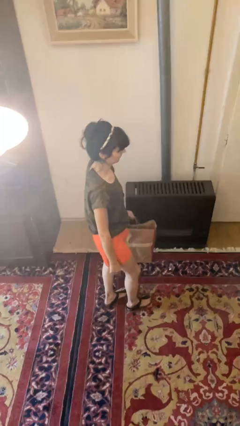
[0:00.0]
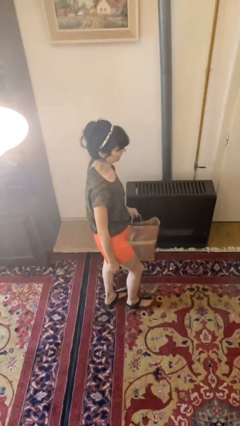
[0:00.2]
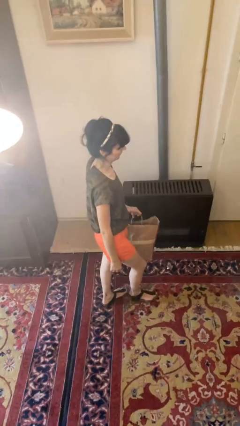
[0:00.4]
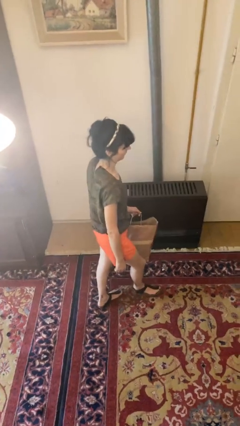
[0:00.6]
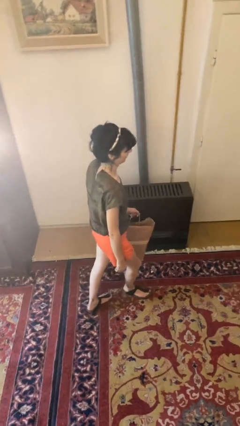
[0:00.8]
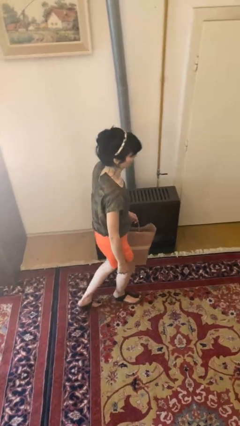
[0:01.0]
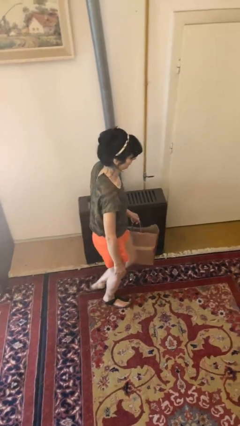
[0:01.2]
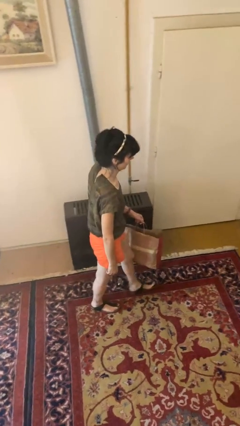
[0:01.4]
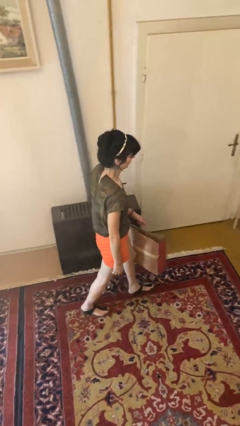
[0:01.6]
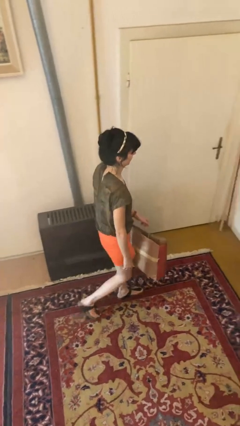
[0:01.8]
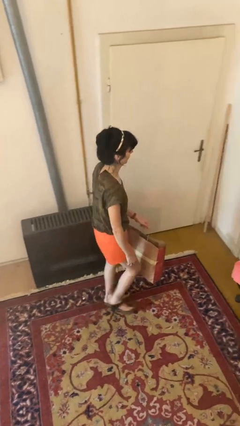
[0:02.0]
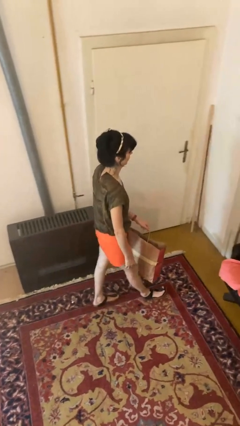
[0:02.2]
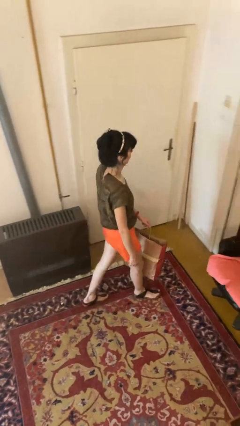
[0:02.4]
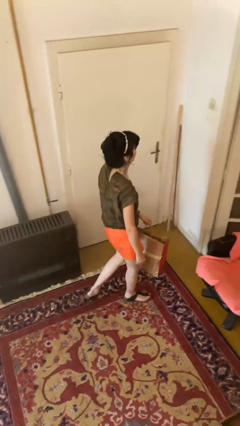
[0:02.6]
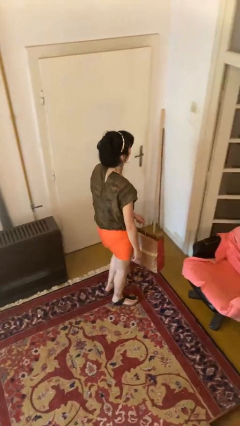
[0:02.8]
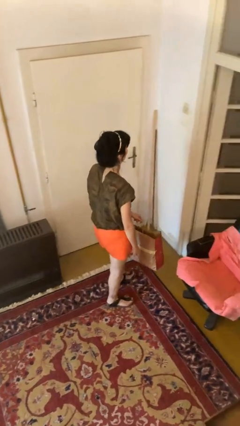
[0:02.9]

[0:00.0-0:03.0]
person carries groceries

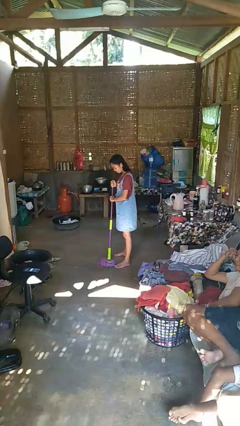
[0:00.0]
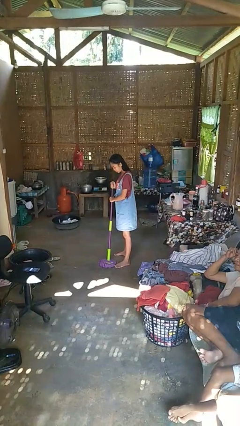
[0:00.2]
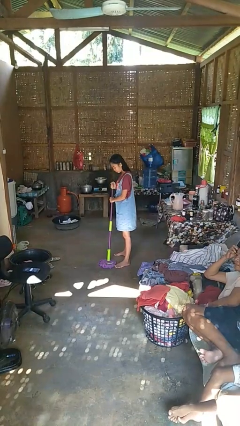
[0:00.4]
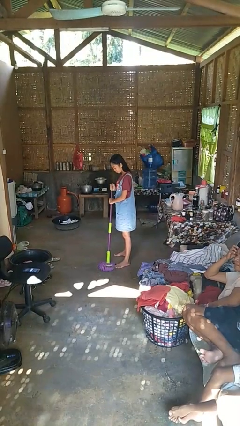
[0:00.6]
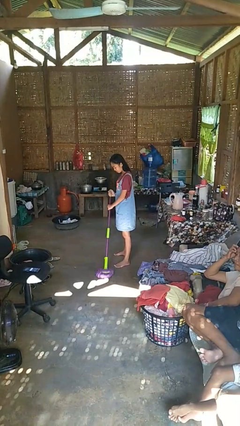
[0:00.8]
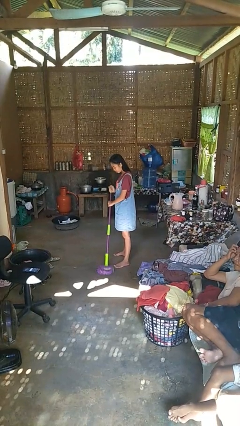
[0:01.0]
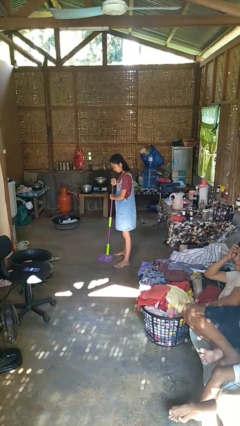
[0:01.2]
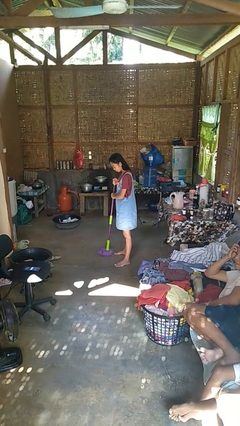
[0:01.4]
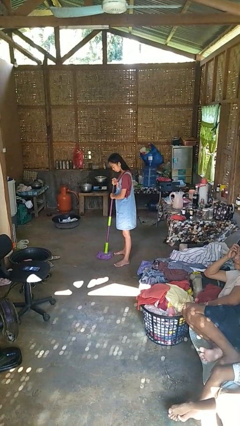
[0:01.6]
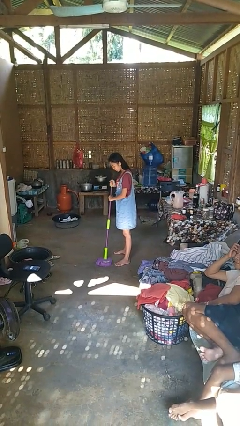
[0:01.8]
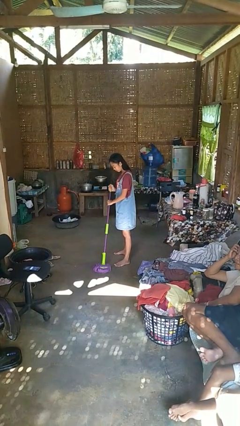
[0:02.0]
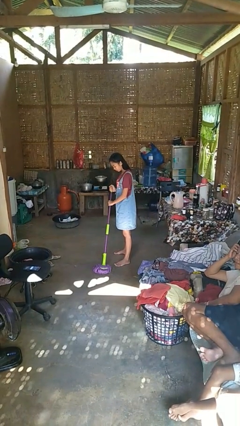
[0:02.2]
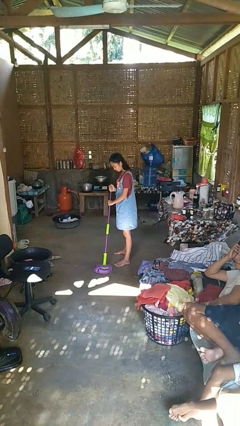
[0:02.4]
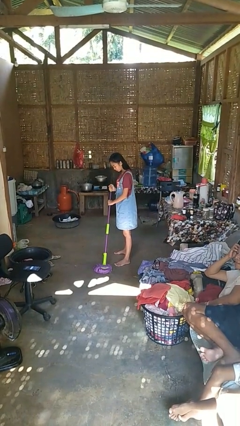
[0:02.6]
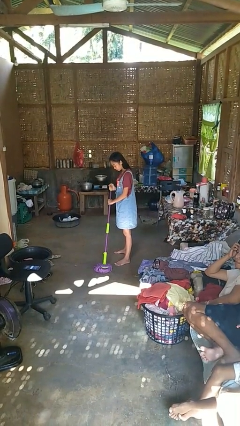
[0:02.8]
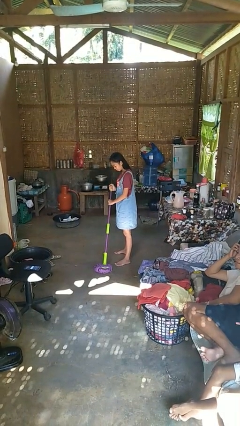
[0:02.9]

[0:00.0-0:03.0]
person mops

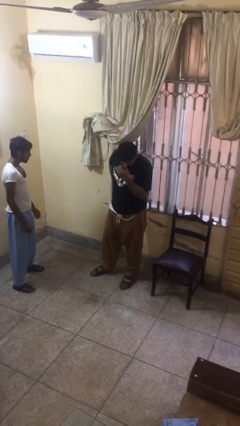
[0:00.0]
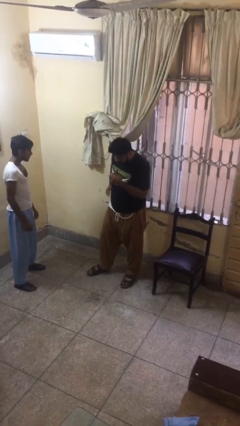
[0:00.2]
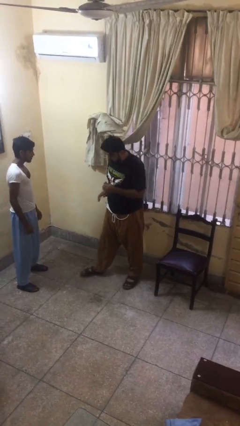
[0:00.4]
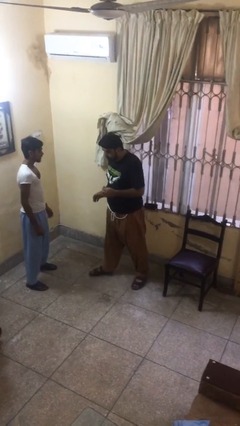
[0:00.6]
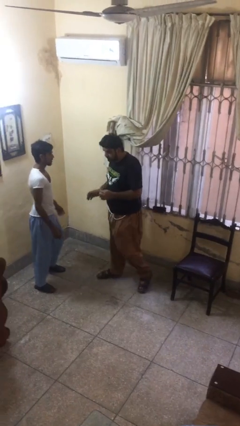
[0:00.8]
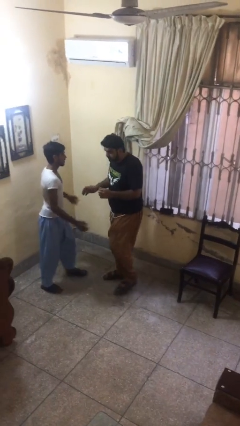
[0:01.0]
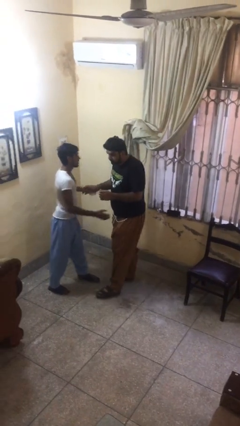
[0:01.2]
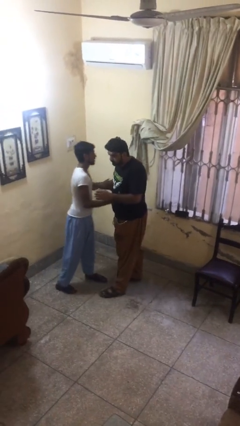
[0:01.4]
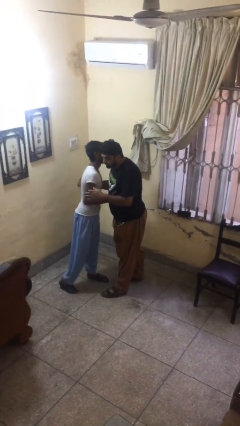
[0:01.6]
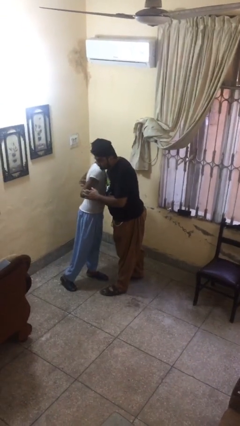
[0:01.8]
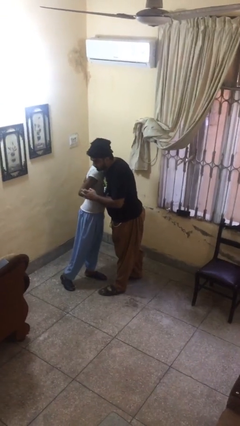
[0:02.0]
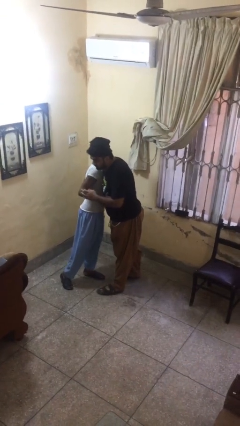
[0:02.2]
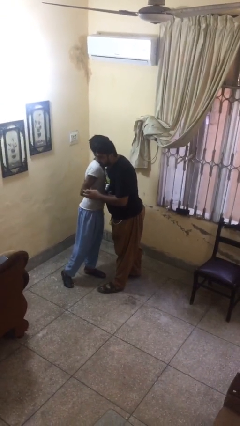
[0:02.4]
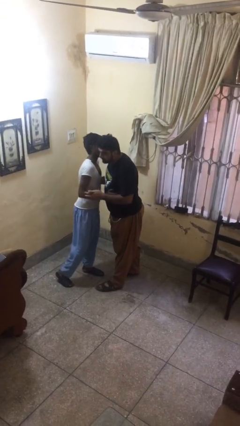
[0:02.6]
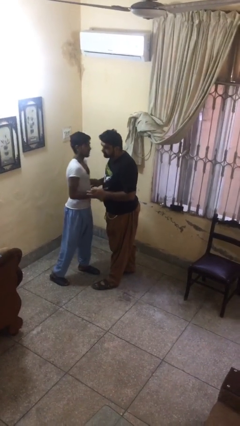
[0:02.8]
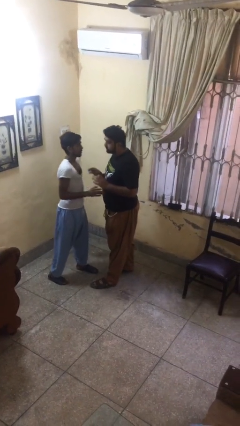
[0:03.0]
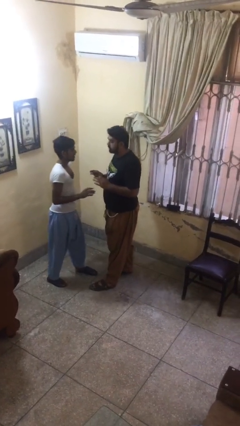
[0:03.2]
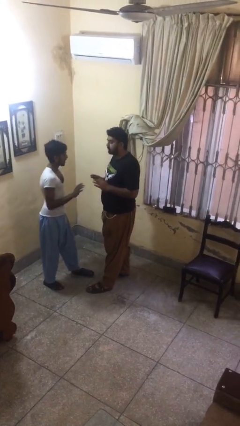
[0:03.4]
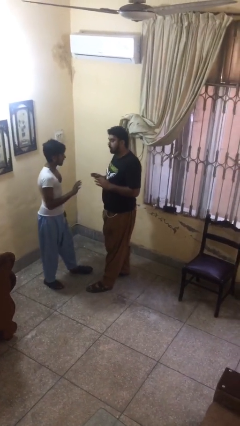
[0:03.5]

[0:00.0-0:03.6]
person embraces person

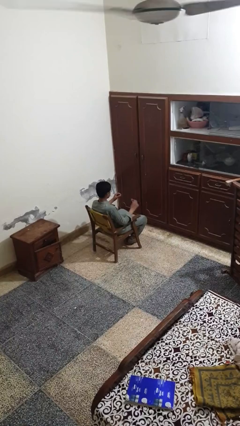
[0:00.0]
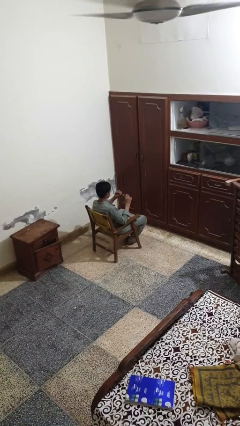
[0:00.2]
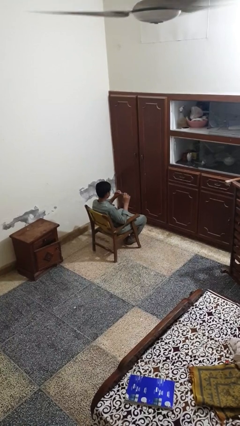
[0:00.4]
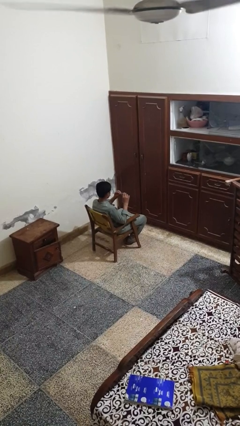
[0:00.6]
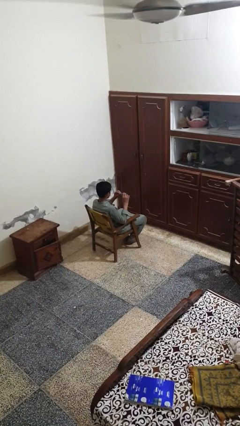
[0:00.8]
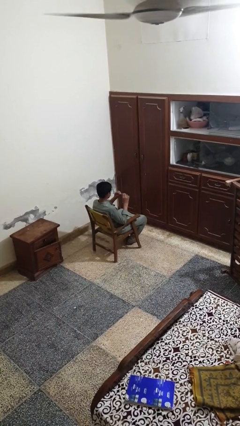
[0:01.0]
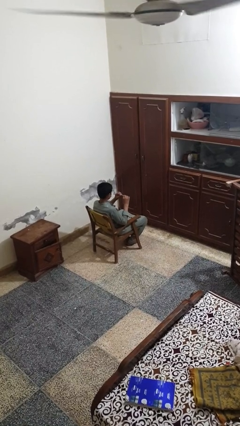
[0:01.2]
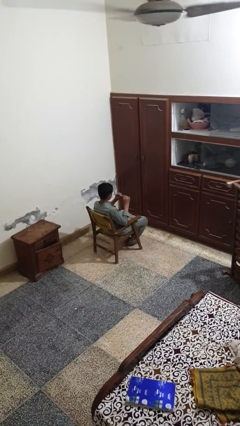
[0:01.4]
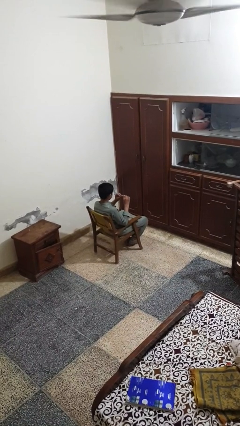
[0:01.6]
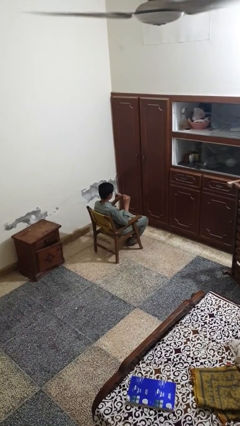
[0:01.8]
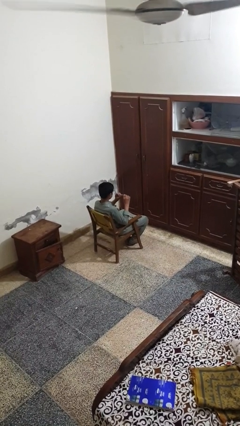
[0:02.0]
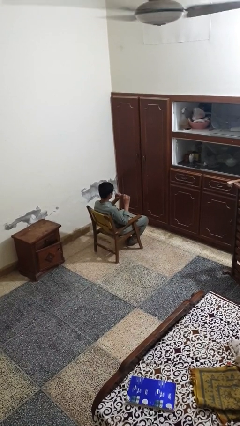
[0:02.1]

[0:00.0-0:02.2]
person clips fingernails

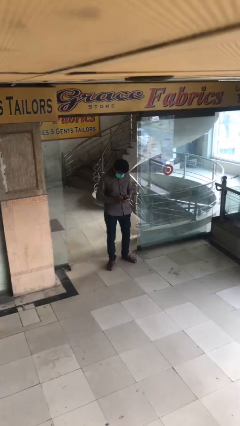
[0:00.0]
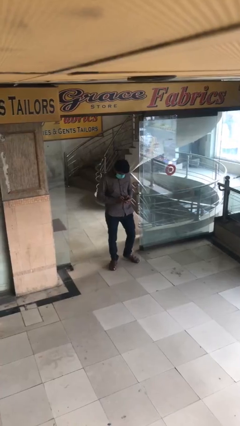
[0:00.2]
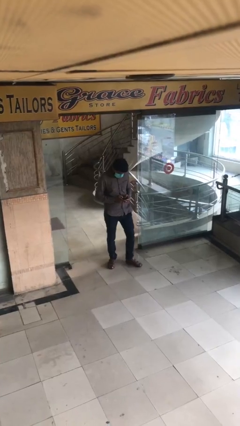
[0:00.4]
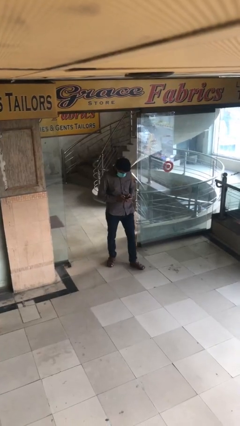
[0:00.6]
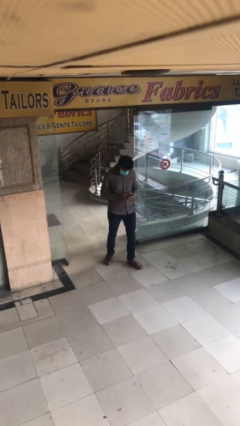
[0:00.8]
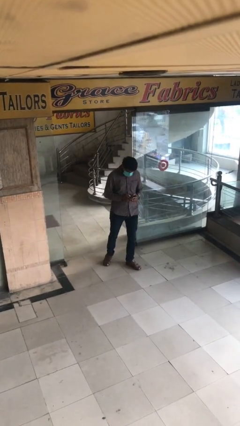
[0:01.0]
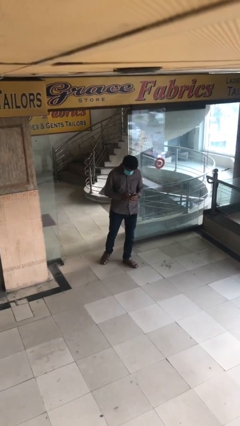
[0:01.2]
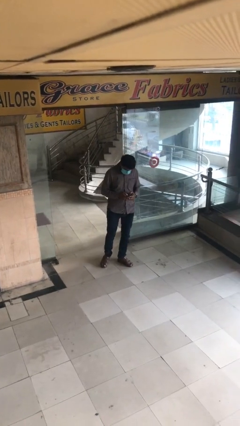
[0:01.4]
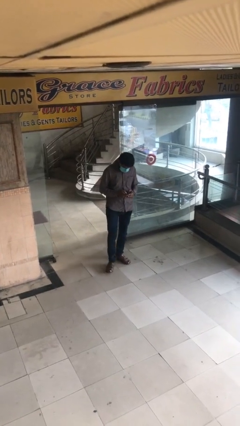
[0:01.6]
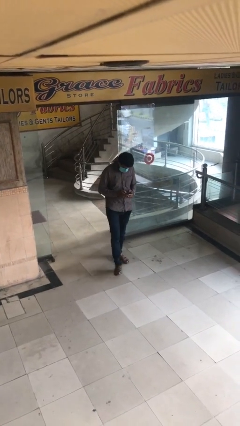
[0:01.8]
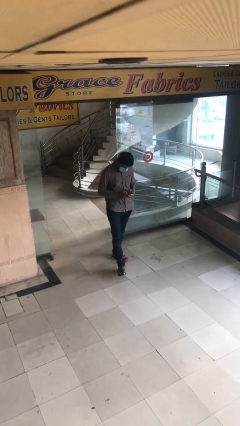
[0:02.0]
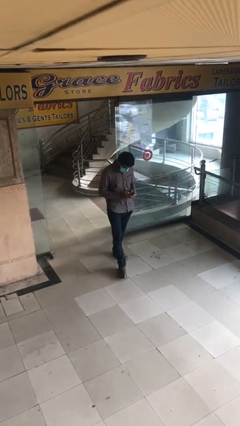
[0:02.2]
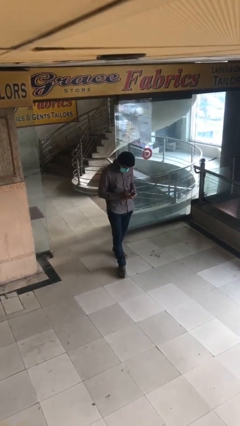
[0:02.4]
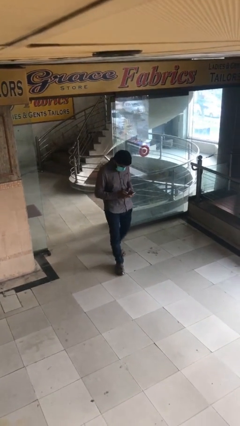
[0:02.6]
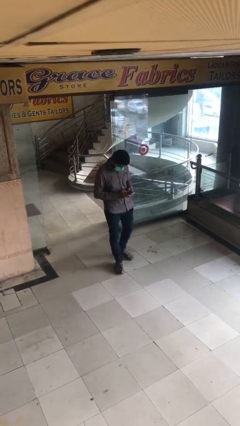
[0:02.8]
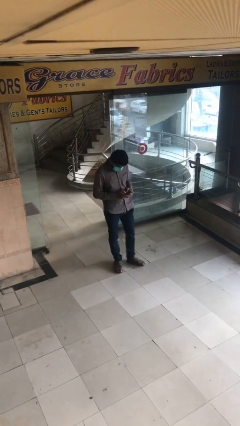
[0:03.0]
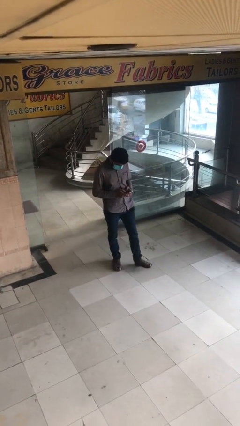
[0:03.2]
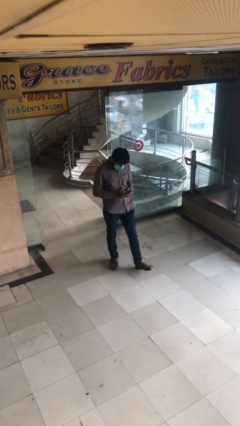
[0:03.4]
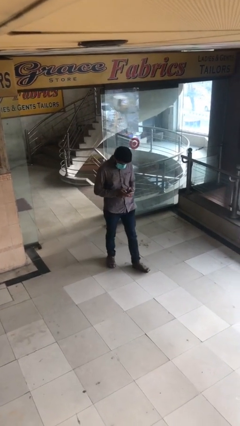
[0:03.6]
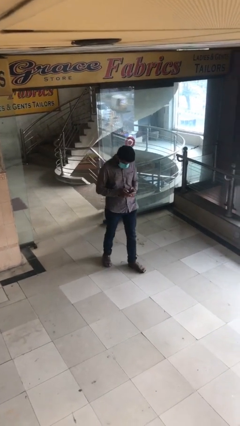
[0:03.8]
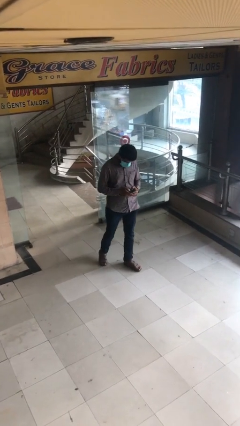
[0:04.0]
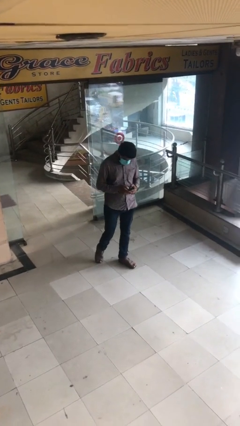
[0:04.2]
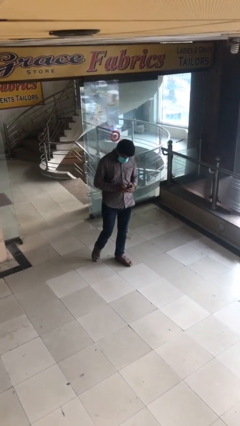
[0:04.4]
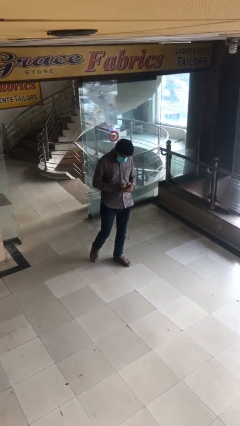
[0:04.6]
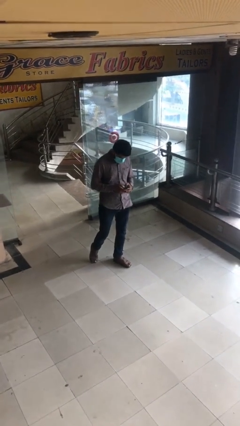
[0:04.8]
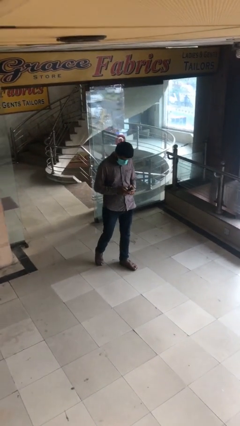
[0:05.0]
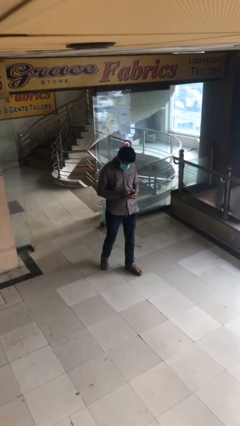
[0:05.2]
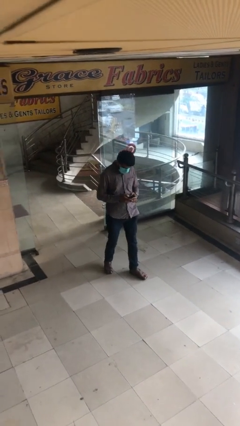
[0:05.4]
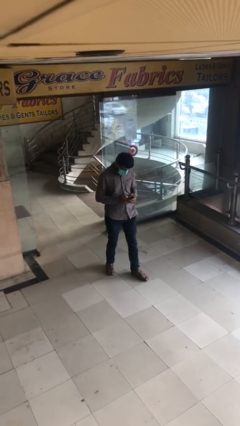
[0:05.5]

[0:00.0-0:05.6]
person texts on phone
